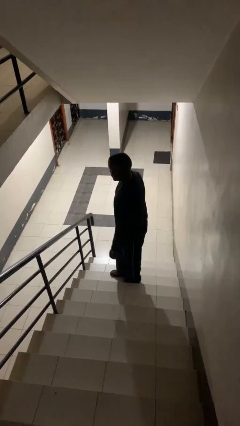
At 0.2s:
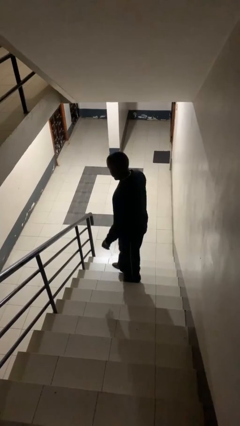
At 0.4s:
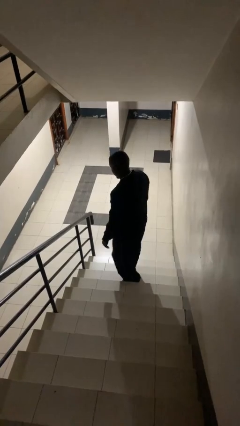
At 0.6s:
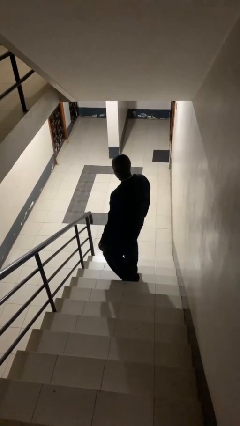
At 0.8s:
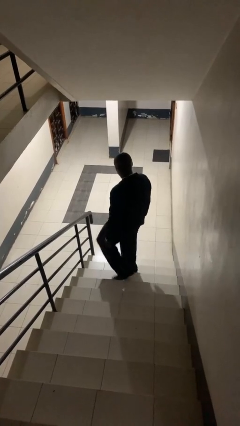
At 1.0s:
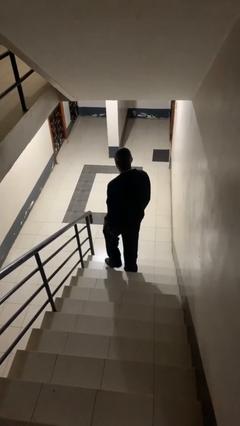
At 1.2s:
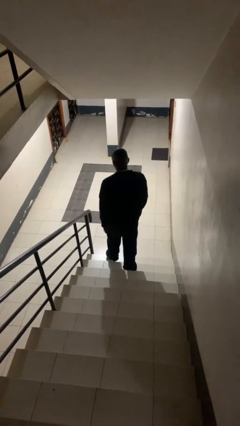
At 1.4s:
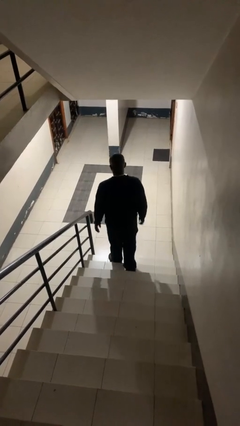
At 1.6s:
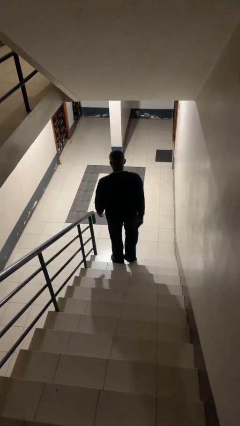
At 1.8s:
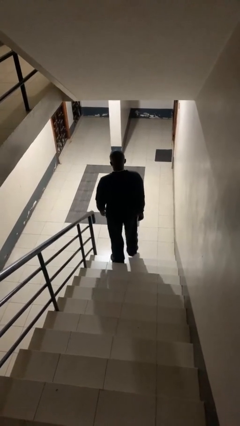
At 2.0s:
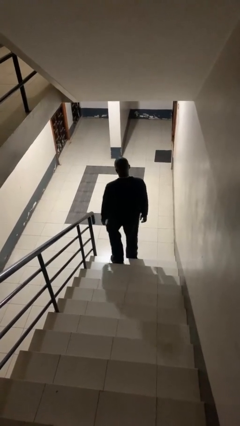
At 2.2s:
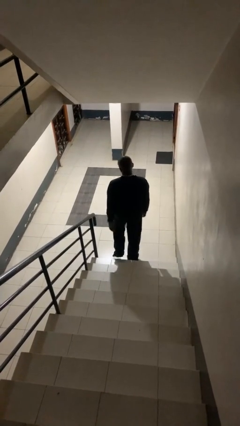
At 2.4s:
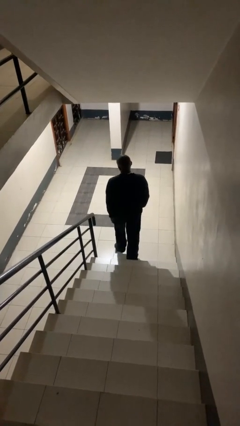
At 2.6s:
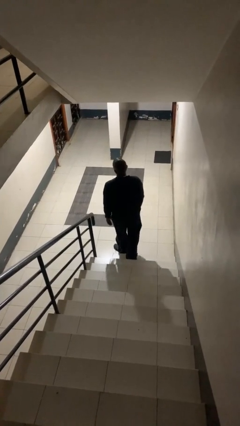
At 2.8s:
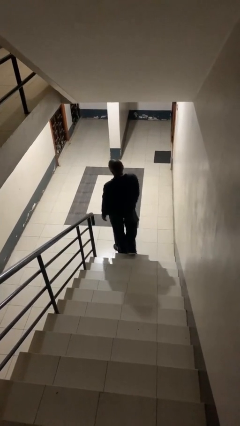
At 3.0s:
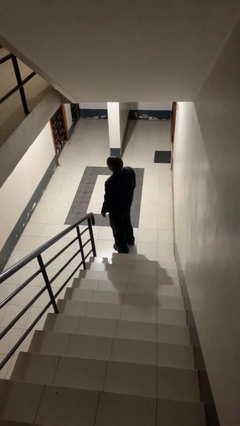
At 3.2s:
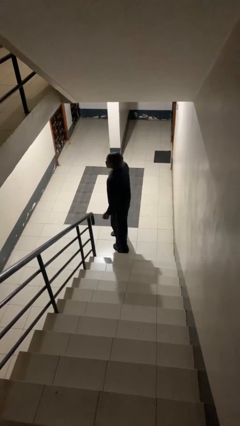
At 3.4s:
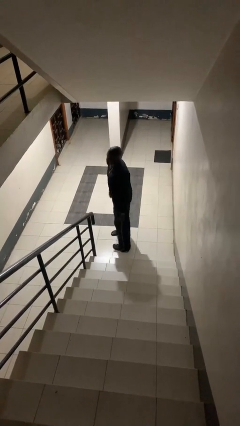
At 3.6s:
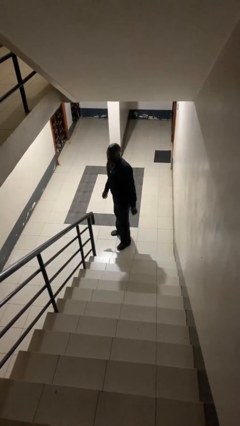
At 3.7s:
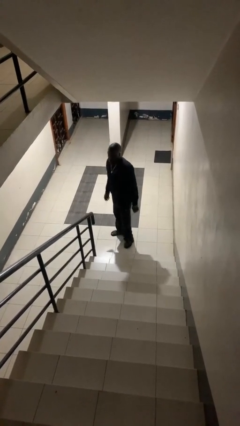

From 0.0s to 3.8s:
person climbs down stairs

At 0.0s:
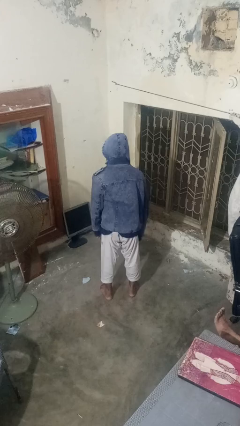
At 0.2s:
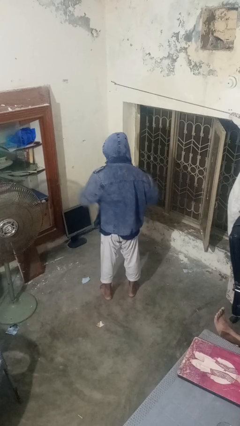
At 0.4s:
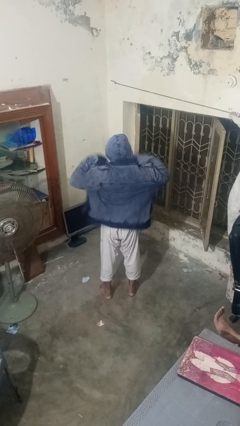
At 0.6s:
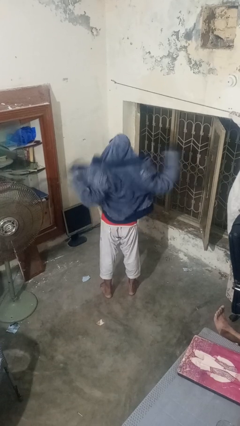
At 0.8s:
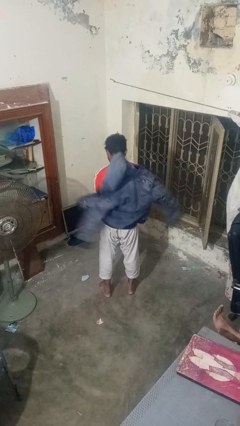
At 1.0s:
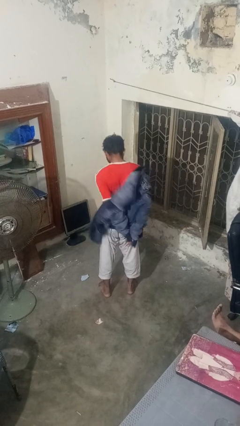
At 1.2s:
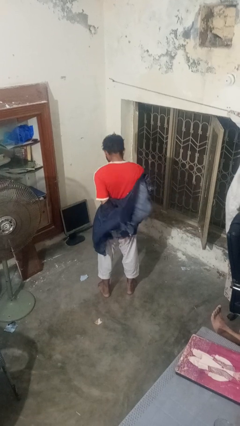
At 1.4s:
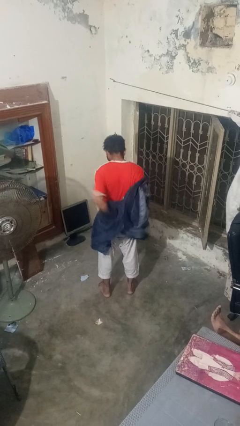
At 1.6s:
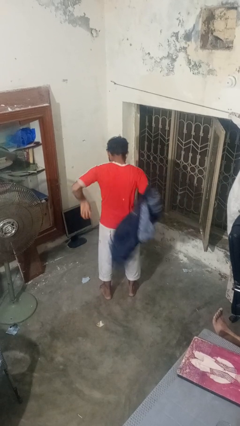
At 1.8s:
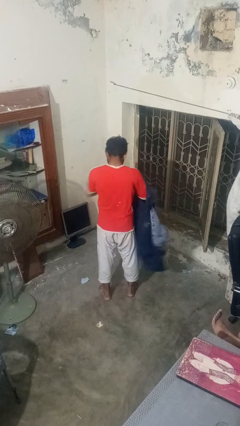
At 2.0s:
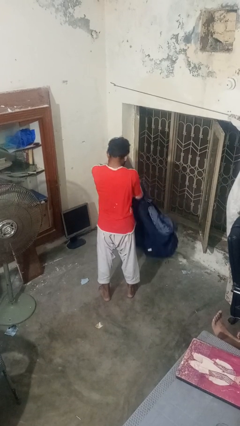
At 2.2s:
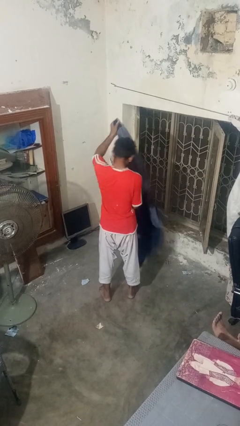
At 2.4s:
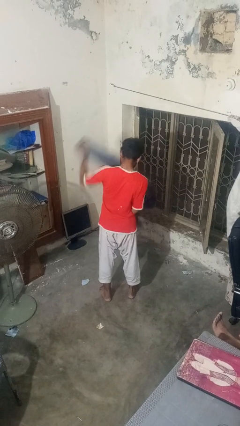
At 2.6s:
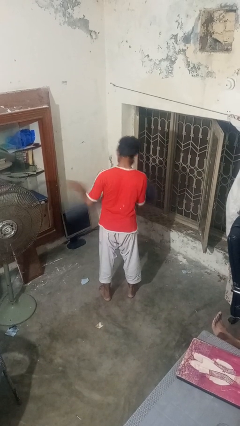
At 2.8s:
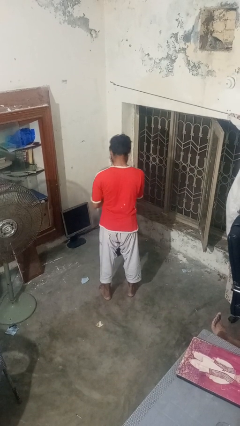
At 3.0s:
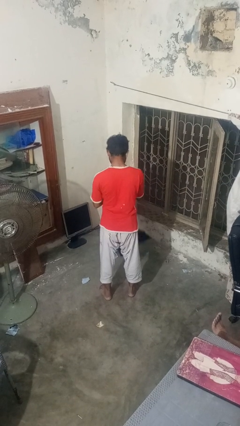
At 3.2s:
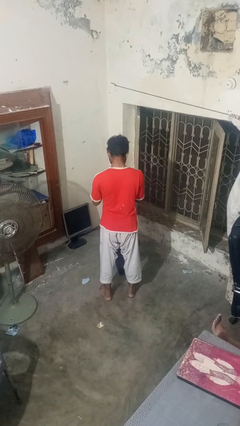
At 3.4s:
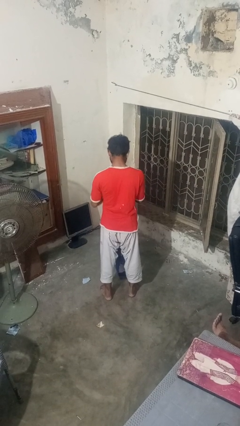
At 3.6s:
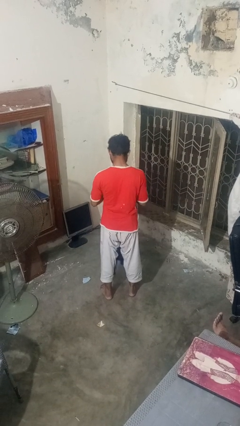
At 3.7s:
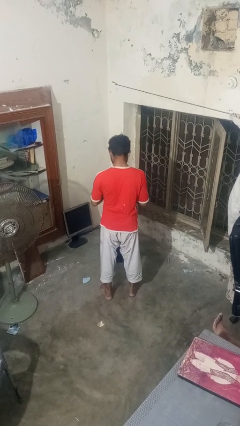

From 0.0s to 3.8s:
person takes off hoodie

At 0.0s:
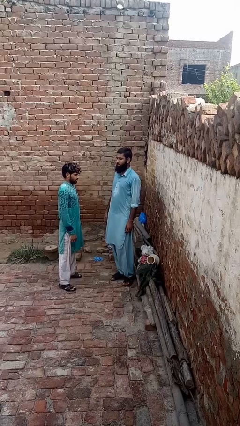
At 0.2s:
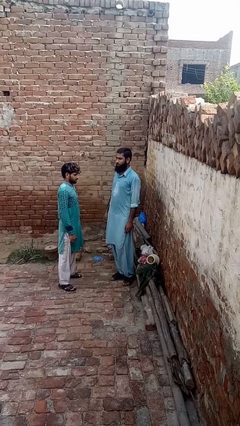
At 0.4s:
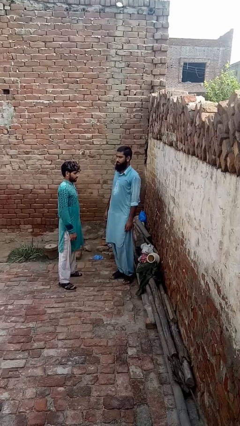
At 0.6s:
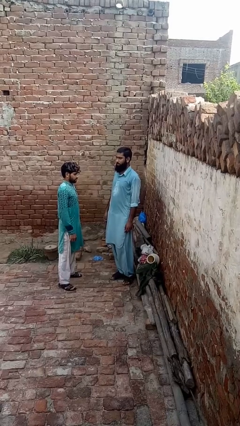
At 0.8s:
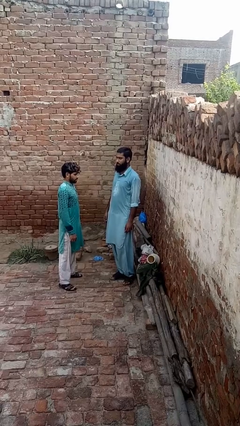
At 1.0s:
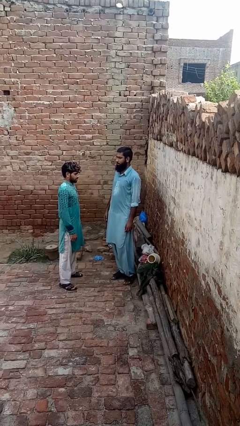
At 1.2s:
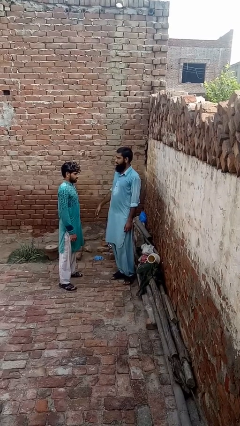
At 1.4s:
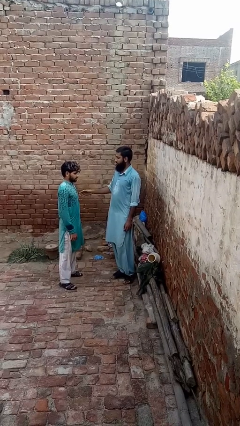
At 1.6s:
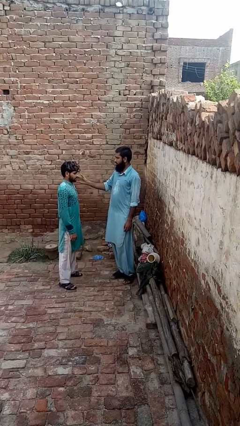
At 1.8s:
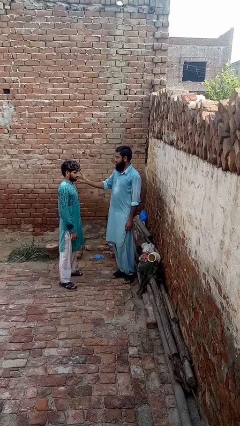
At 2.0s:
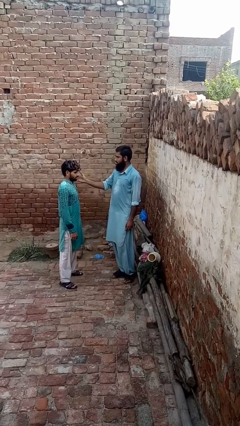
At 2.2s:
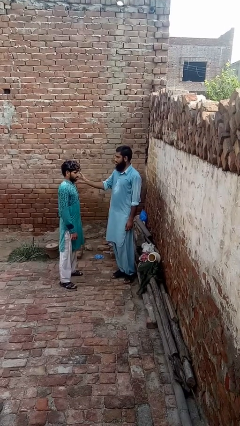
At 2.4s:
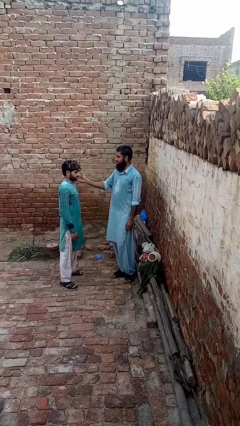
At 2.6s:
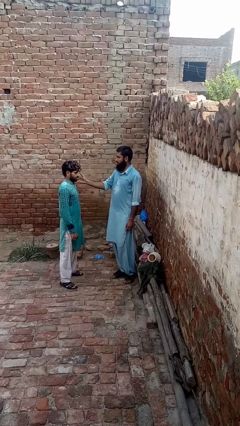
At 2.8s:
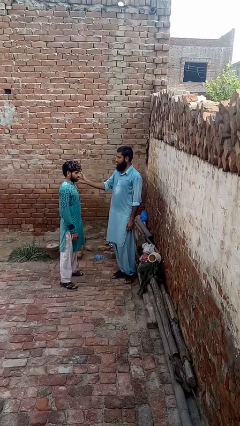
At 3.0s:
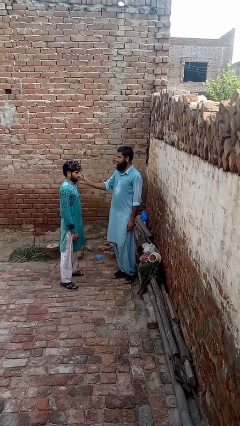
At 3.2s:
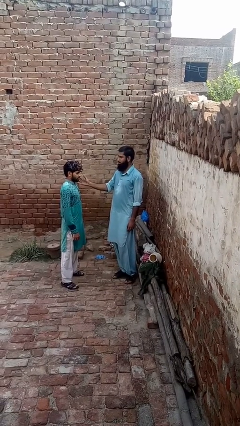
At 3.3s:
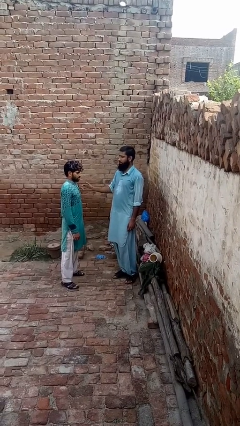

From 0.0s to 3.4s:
person touches face of person

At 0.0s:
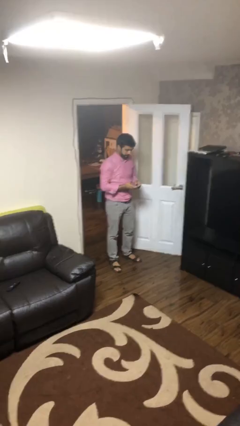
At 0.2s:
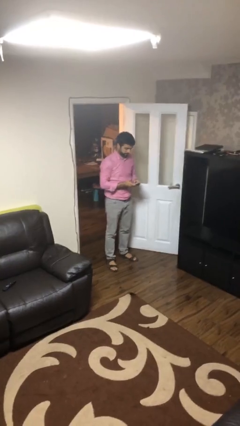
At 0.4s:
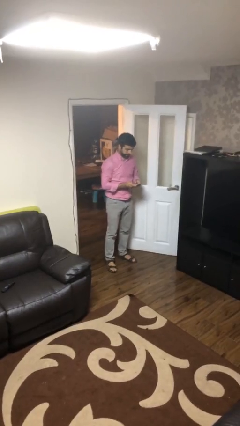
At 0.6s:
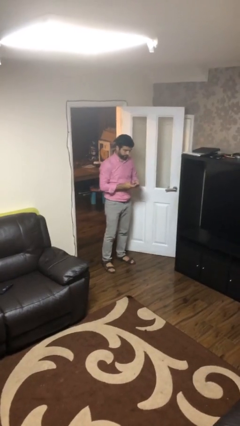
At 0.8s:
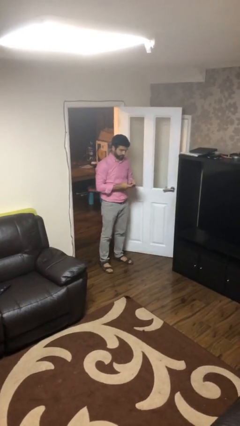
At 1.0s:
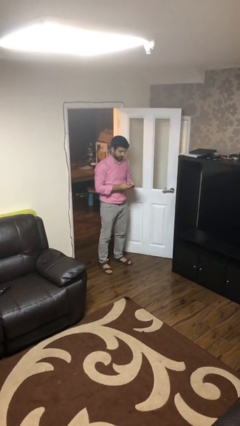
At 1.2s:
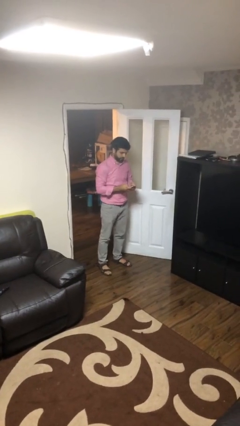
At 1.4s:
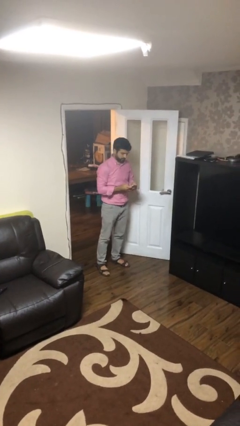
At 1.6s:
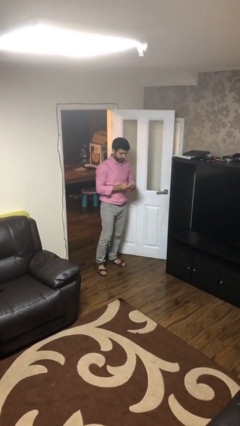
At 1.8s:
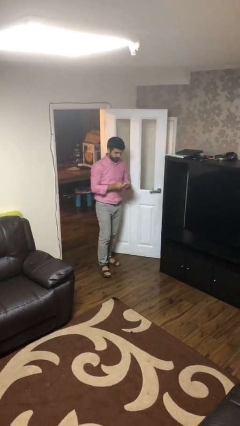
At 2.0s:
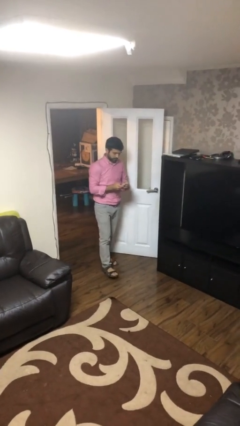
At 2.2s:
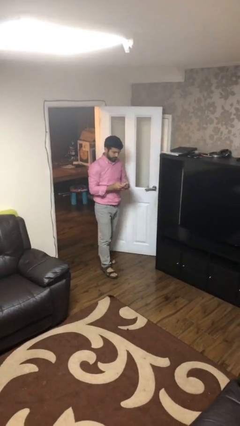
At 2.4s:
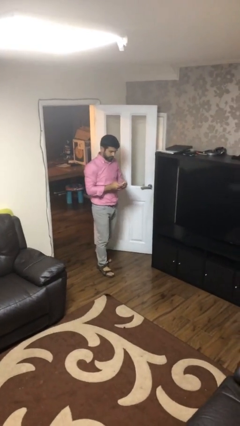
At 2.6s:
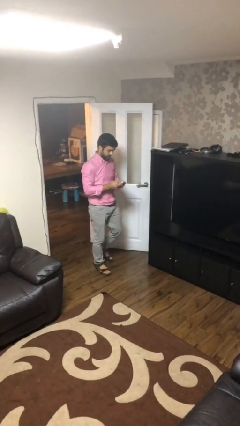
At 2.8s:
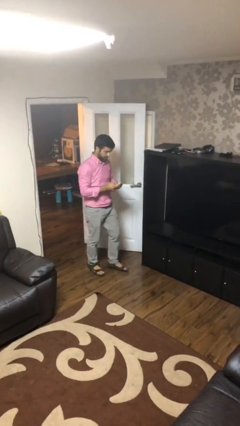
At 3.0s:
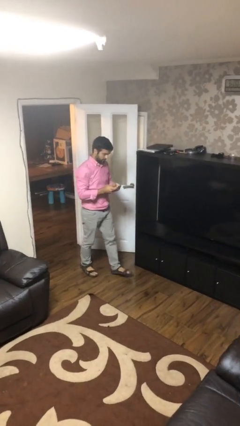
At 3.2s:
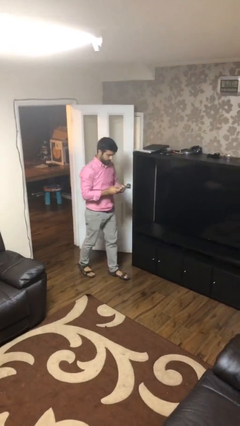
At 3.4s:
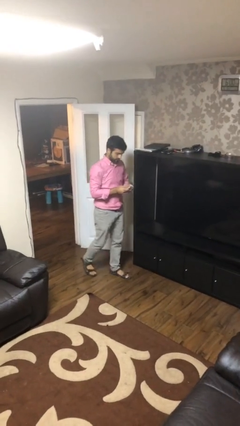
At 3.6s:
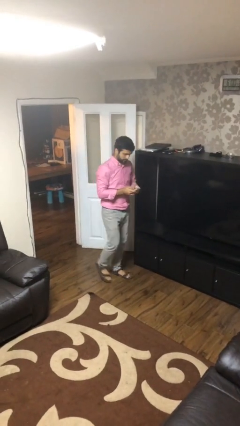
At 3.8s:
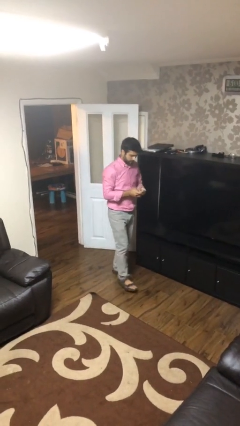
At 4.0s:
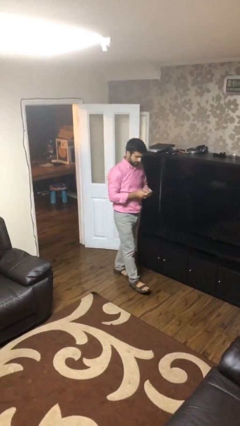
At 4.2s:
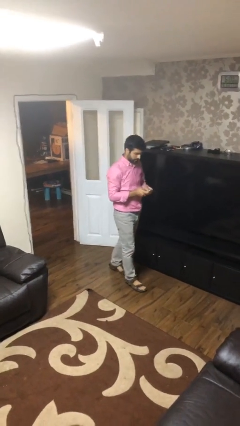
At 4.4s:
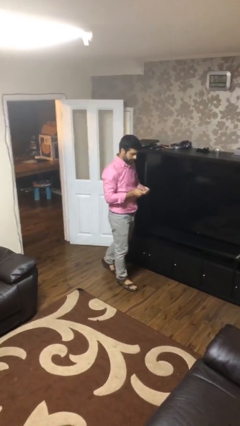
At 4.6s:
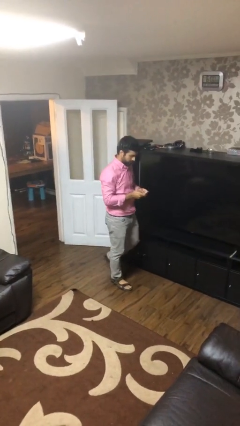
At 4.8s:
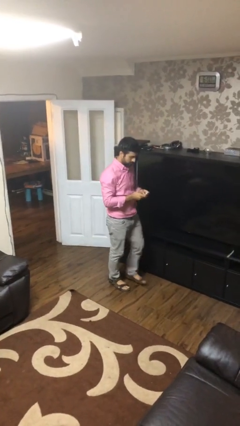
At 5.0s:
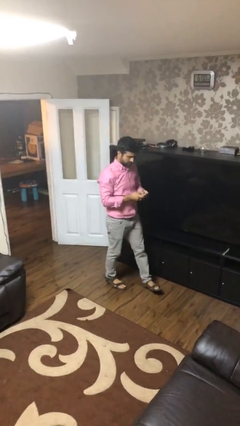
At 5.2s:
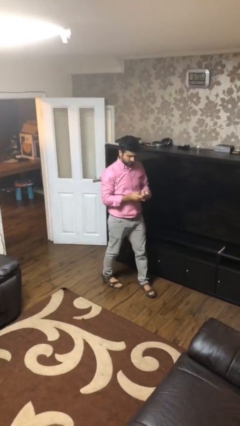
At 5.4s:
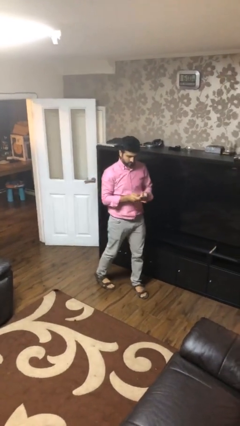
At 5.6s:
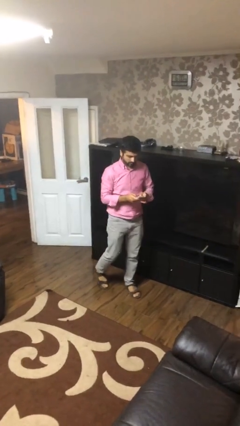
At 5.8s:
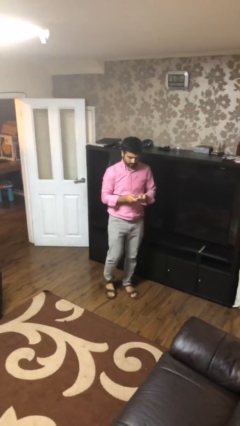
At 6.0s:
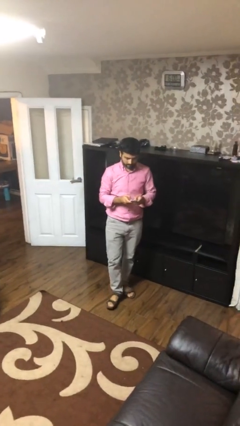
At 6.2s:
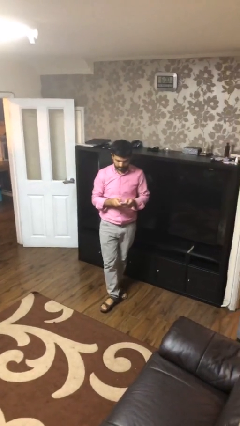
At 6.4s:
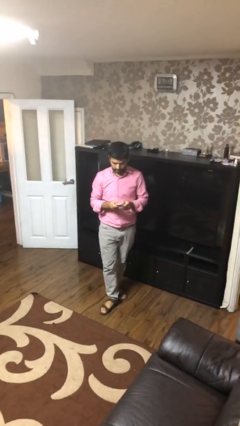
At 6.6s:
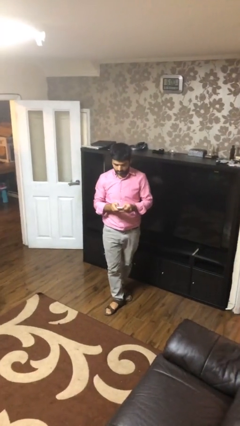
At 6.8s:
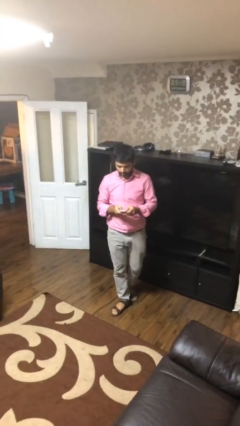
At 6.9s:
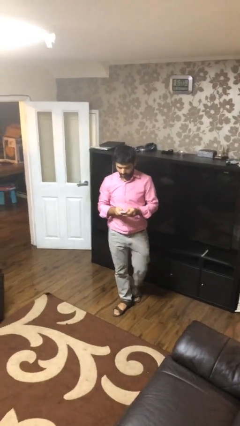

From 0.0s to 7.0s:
person texts on phone
